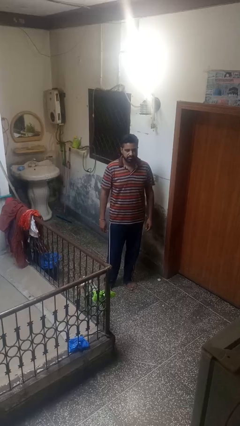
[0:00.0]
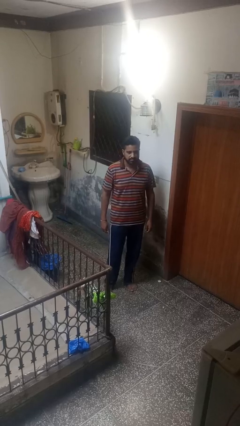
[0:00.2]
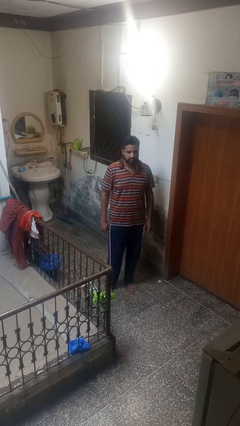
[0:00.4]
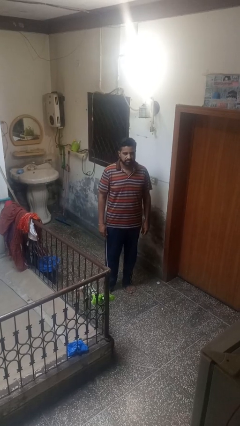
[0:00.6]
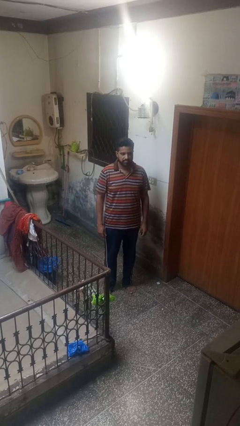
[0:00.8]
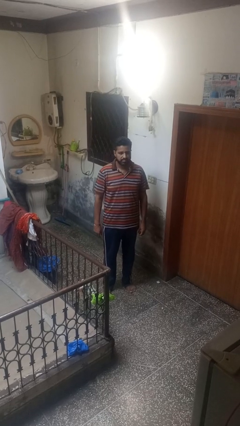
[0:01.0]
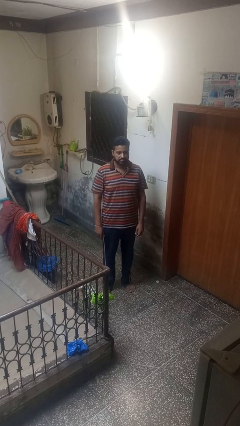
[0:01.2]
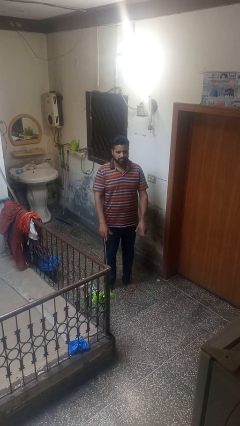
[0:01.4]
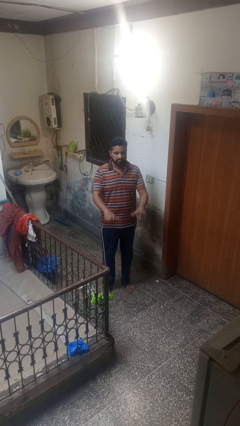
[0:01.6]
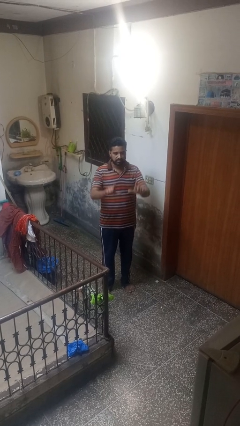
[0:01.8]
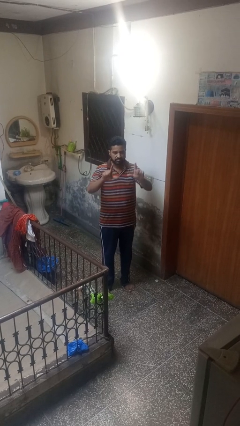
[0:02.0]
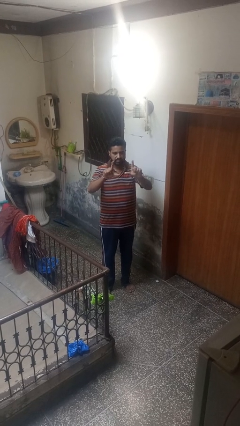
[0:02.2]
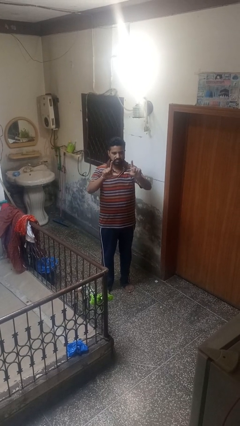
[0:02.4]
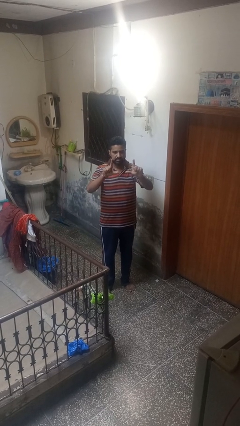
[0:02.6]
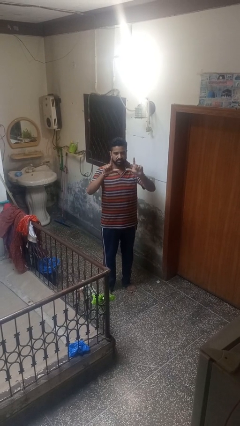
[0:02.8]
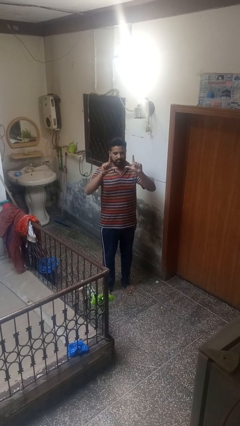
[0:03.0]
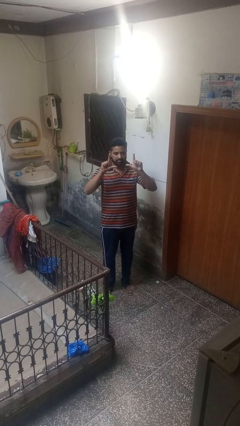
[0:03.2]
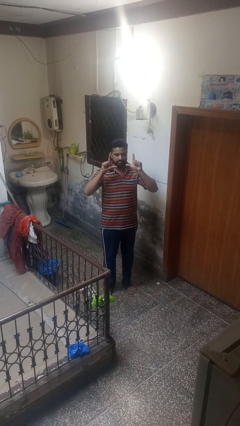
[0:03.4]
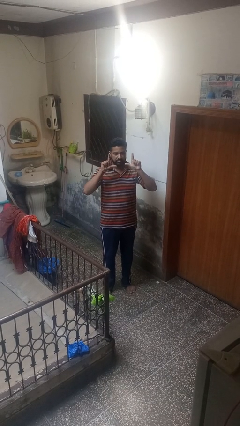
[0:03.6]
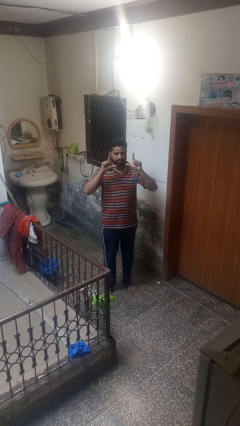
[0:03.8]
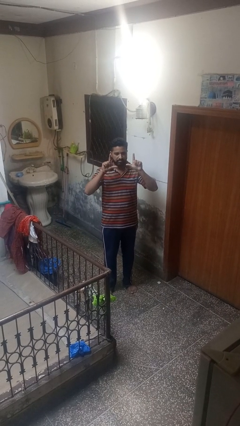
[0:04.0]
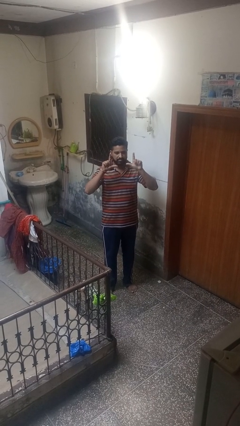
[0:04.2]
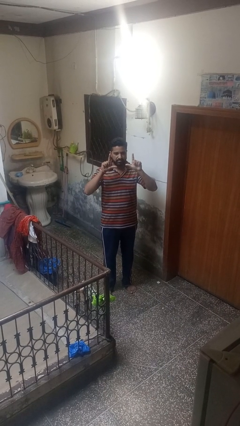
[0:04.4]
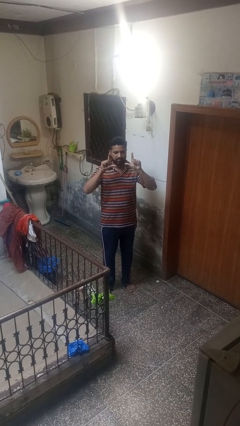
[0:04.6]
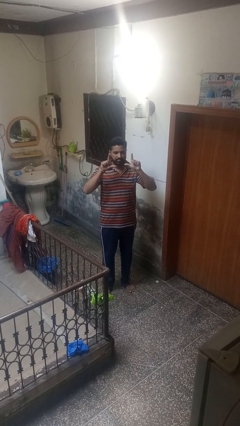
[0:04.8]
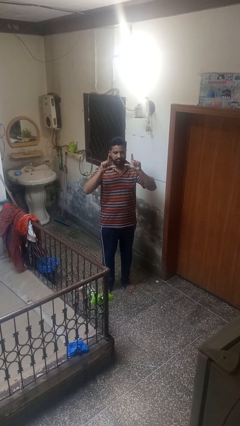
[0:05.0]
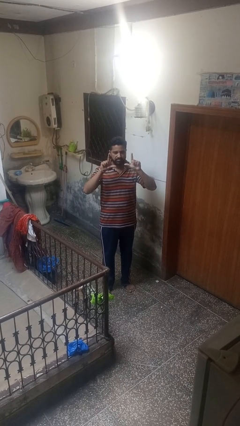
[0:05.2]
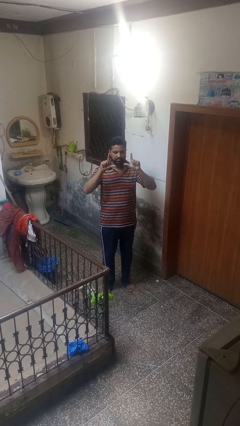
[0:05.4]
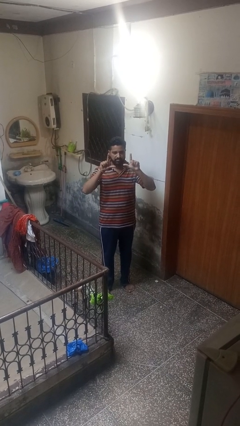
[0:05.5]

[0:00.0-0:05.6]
person gestures zoom in

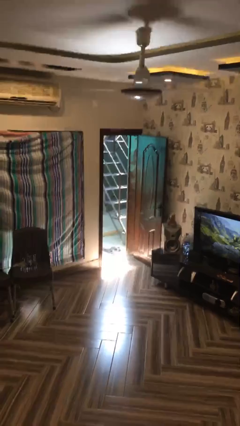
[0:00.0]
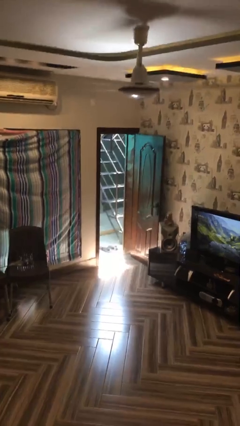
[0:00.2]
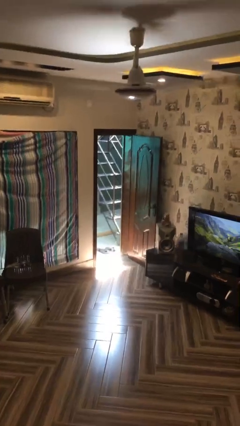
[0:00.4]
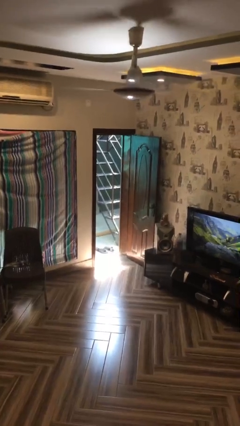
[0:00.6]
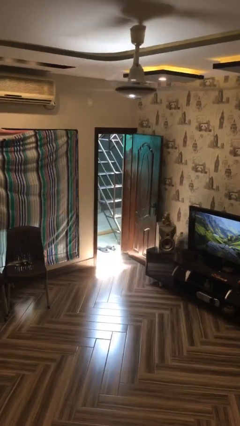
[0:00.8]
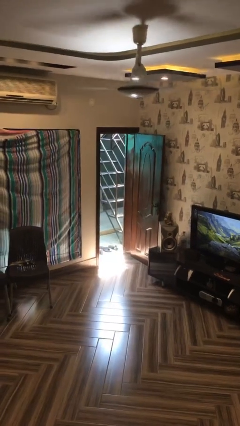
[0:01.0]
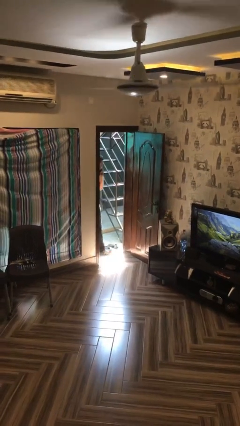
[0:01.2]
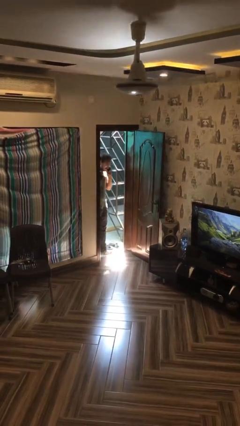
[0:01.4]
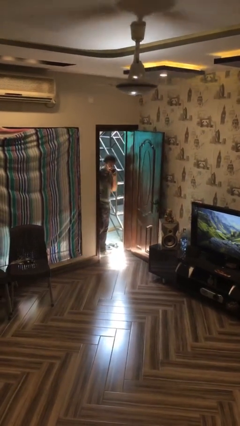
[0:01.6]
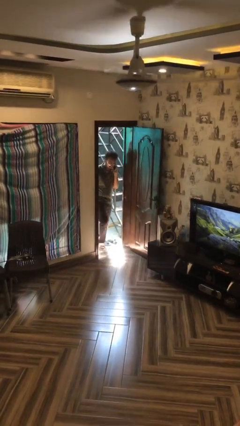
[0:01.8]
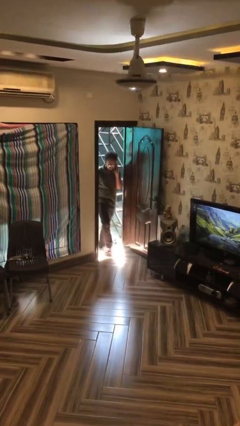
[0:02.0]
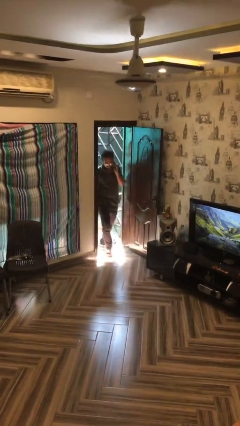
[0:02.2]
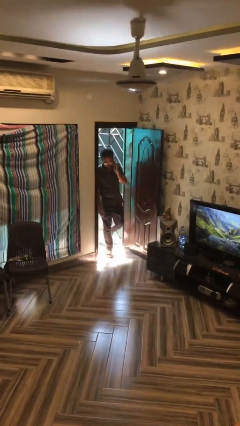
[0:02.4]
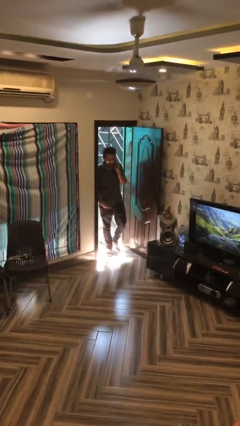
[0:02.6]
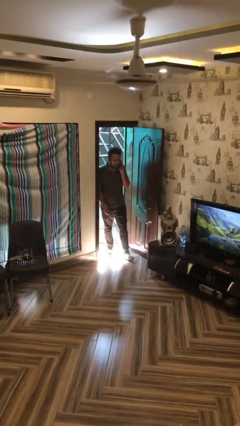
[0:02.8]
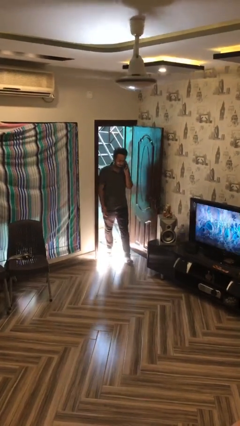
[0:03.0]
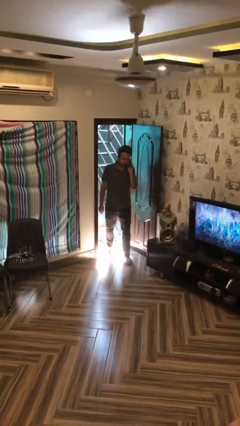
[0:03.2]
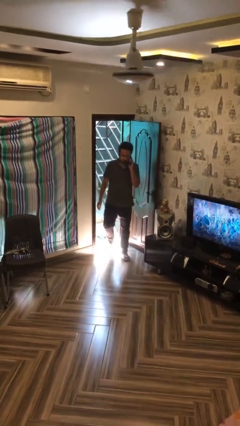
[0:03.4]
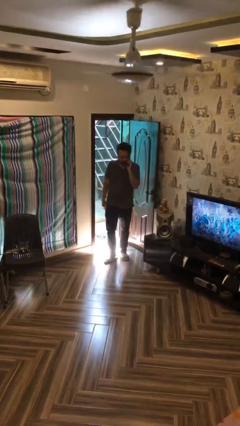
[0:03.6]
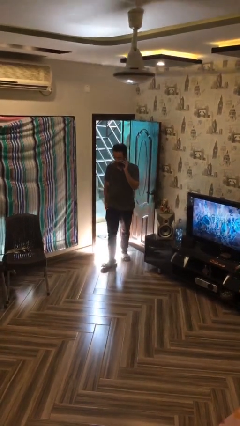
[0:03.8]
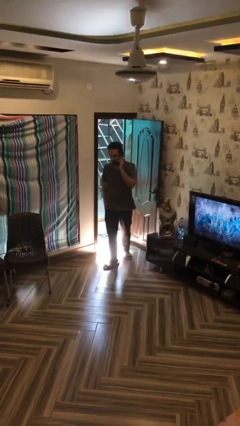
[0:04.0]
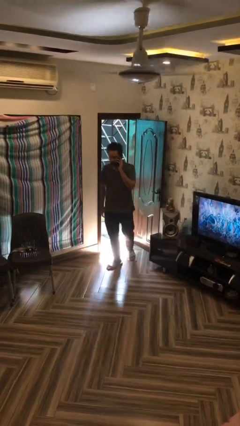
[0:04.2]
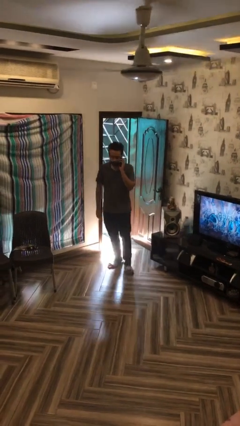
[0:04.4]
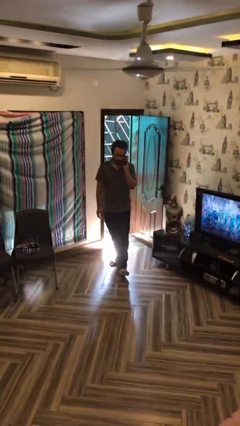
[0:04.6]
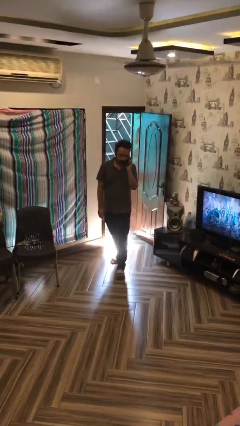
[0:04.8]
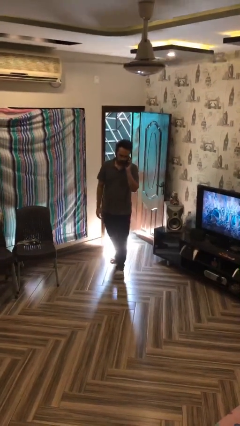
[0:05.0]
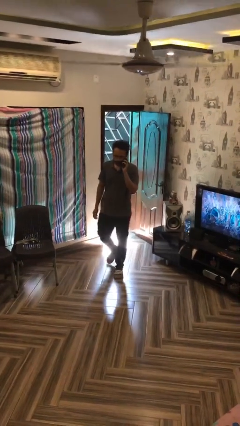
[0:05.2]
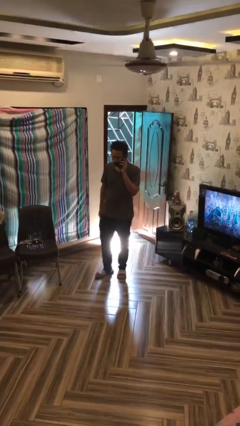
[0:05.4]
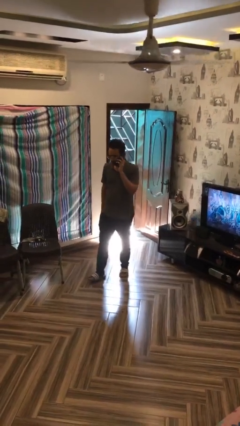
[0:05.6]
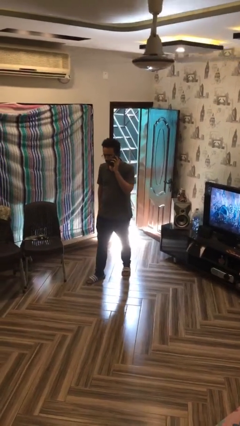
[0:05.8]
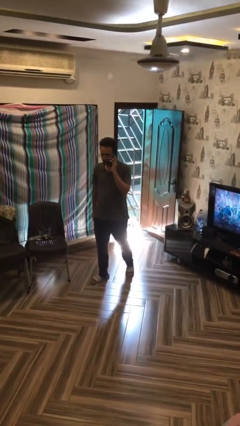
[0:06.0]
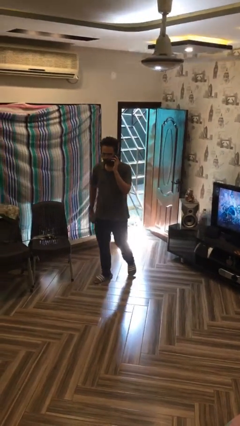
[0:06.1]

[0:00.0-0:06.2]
person enters scene through structure

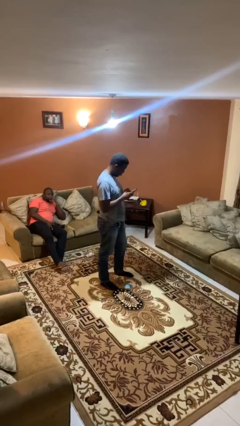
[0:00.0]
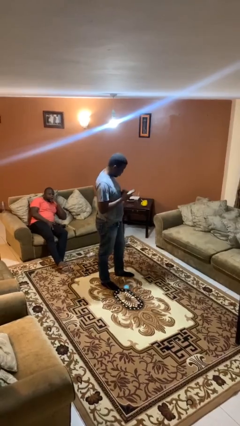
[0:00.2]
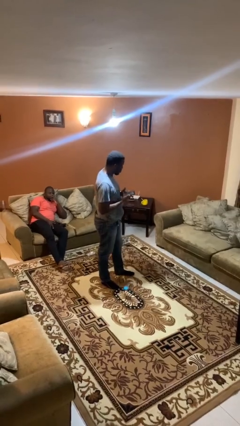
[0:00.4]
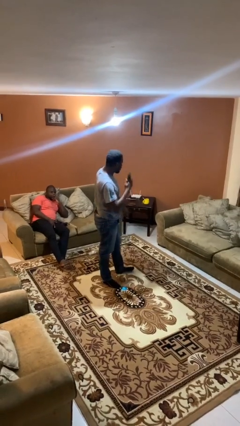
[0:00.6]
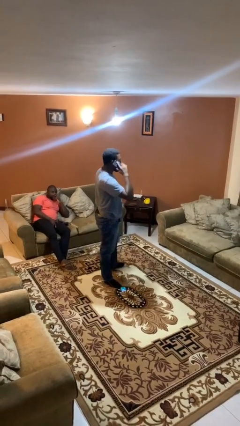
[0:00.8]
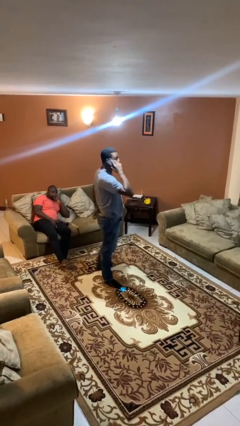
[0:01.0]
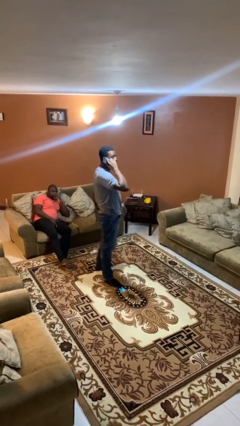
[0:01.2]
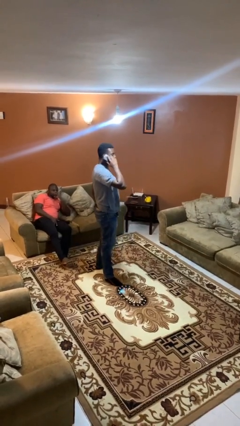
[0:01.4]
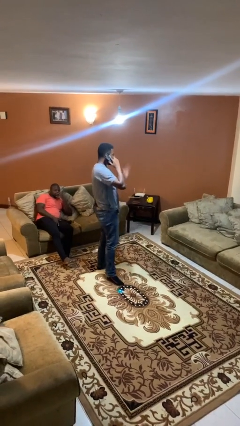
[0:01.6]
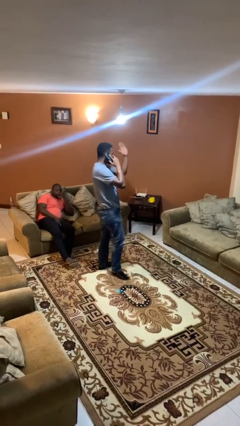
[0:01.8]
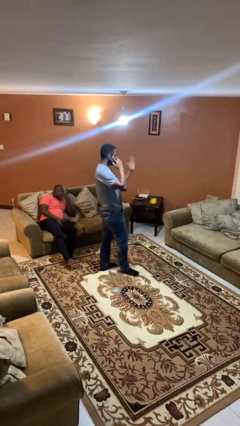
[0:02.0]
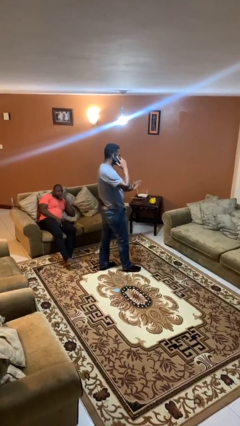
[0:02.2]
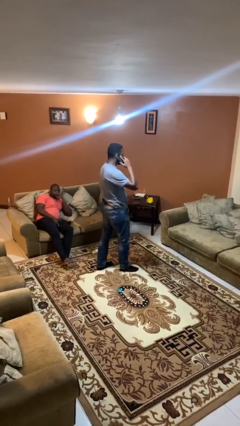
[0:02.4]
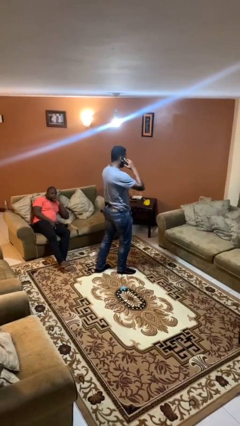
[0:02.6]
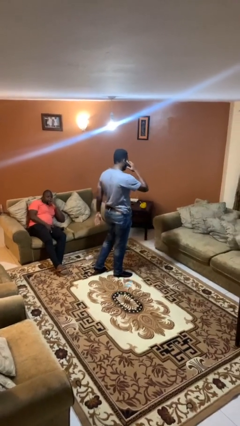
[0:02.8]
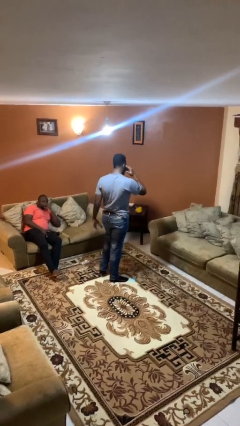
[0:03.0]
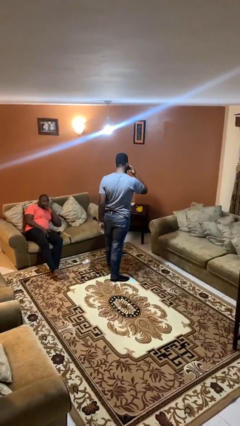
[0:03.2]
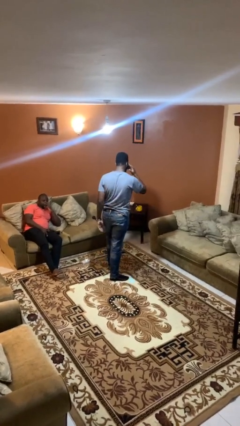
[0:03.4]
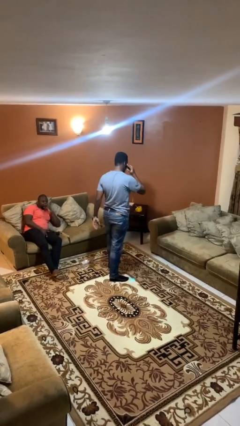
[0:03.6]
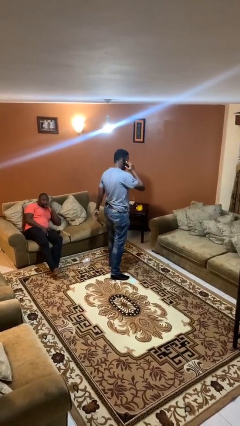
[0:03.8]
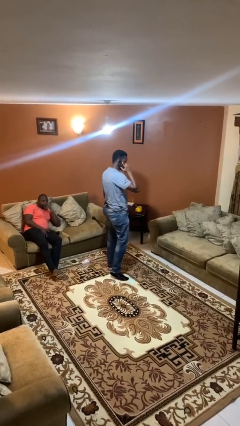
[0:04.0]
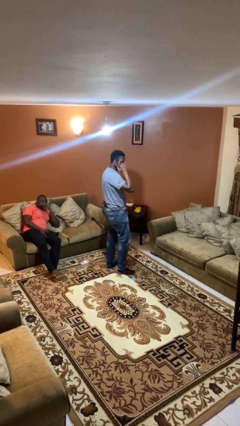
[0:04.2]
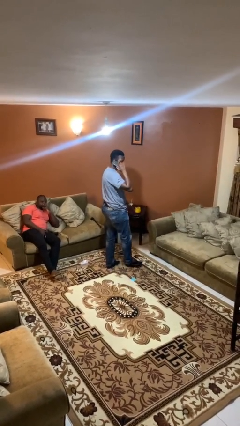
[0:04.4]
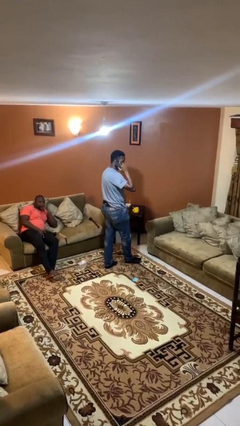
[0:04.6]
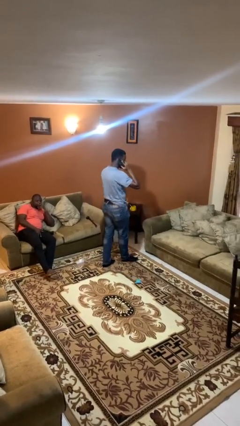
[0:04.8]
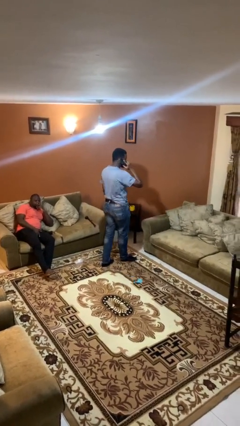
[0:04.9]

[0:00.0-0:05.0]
person talks on phone

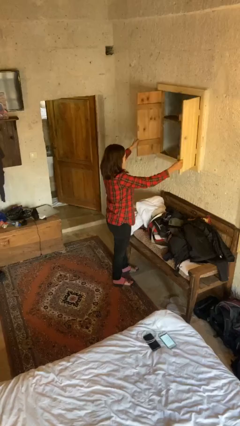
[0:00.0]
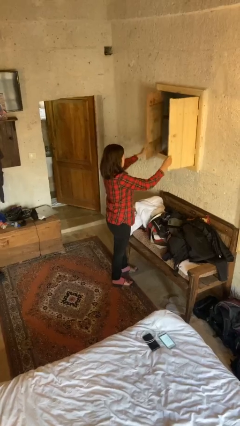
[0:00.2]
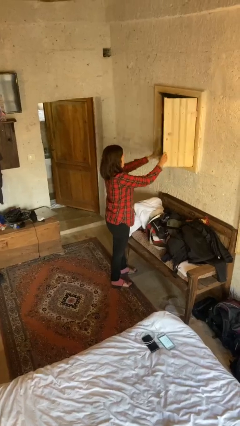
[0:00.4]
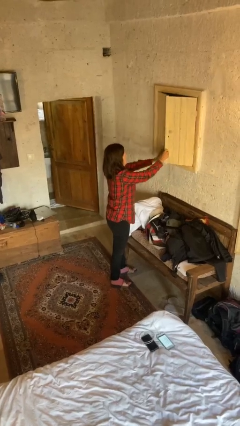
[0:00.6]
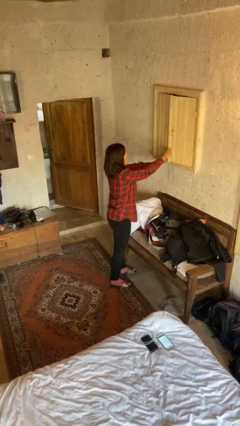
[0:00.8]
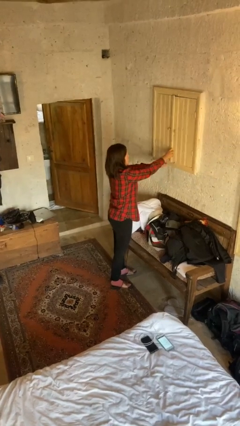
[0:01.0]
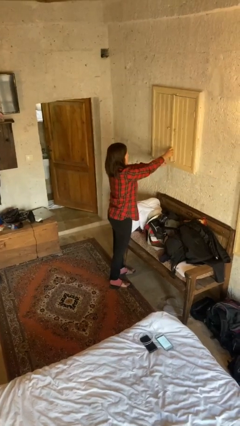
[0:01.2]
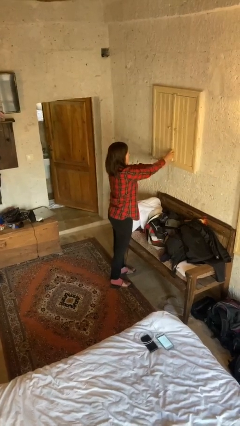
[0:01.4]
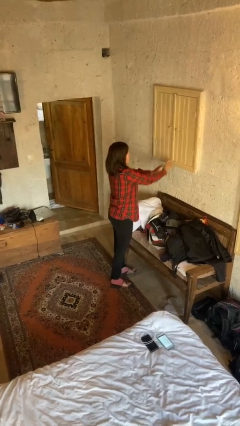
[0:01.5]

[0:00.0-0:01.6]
person closes closet door
